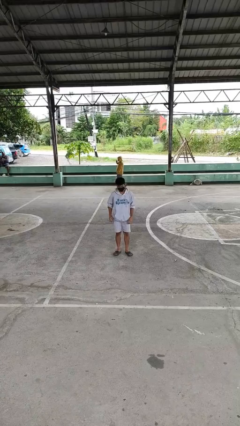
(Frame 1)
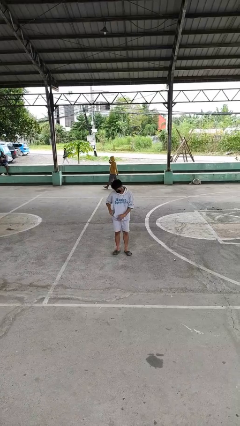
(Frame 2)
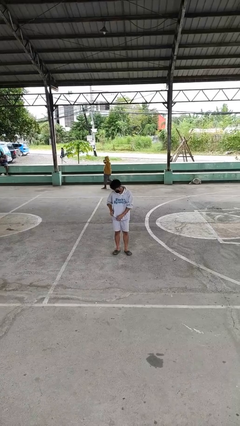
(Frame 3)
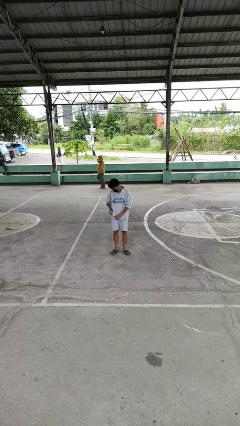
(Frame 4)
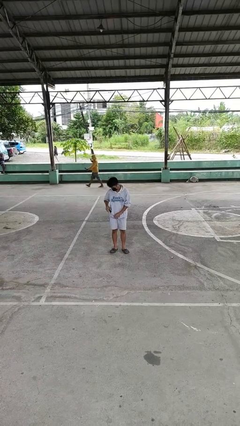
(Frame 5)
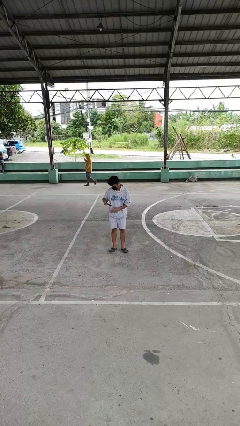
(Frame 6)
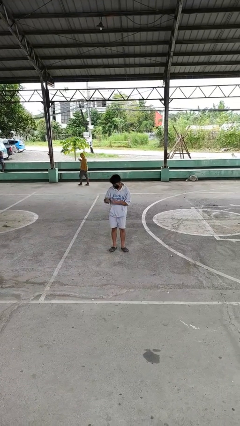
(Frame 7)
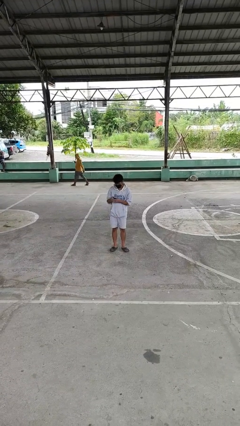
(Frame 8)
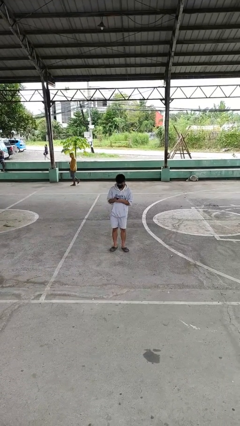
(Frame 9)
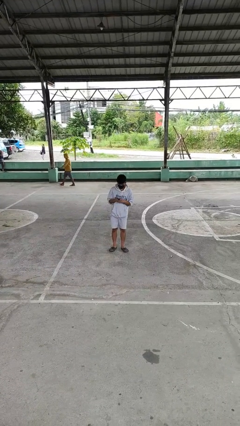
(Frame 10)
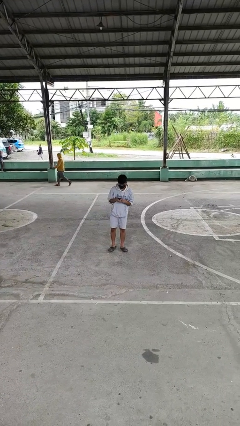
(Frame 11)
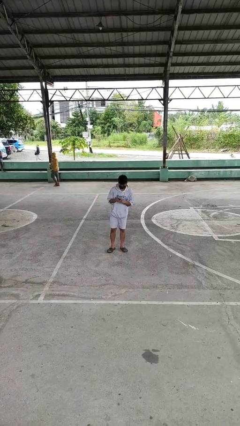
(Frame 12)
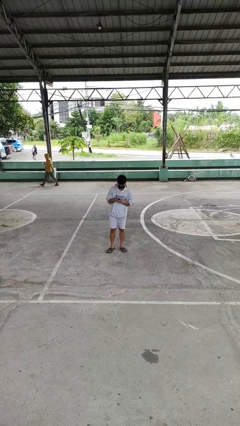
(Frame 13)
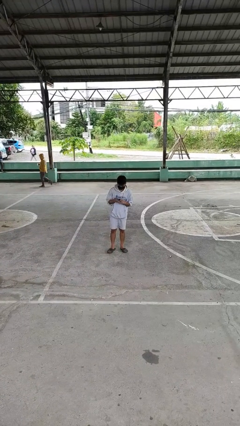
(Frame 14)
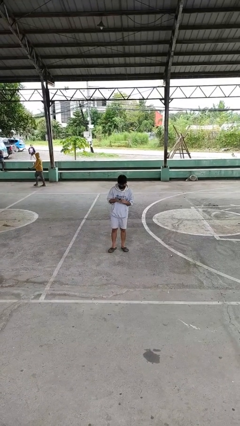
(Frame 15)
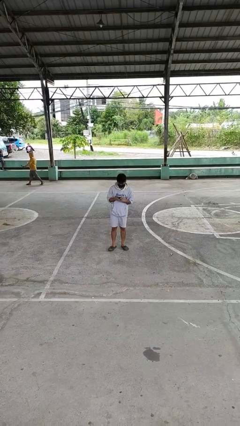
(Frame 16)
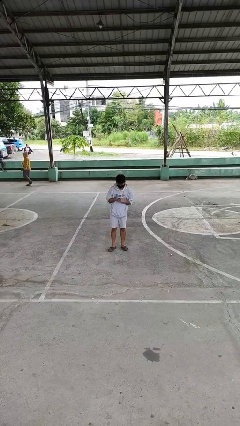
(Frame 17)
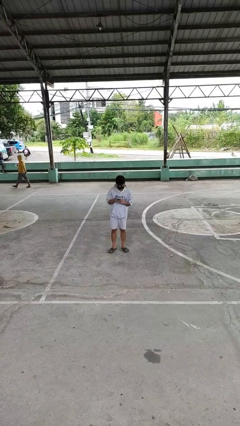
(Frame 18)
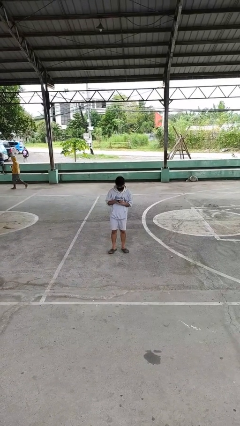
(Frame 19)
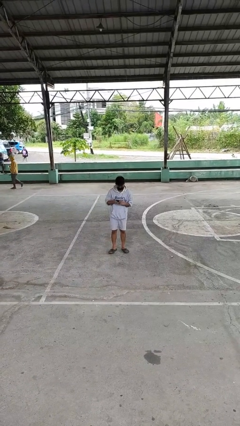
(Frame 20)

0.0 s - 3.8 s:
person takes phone from pocket

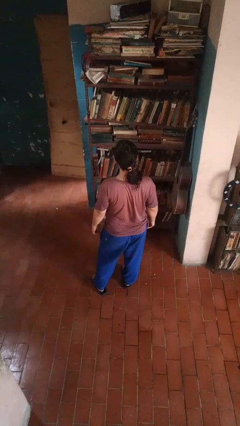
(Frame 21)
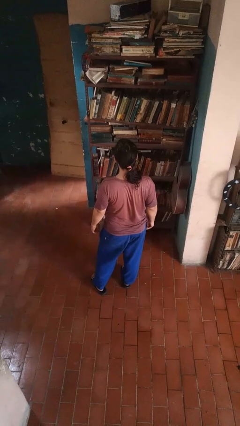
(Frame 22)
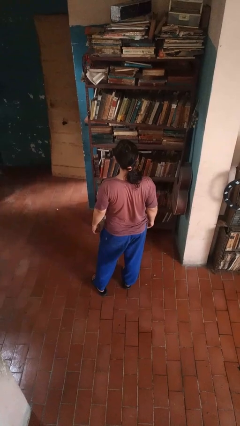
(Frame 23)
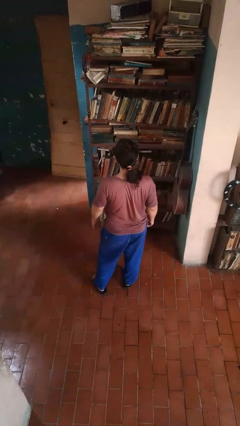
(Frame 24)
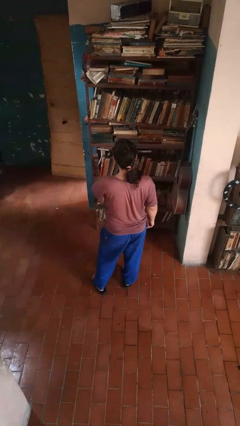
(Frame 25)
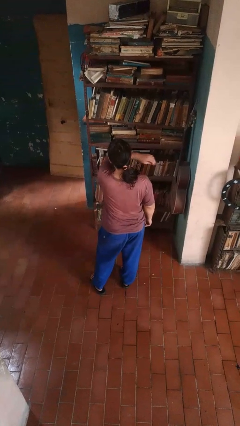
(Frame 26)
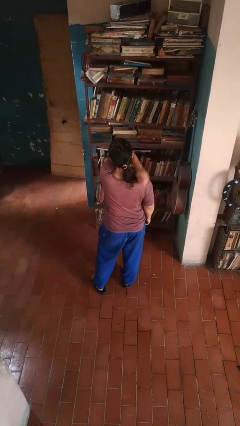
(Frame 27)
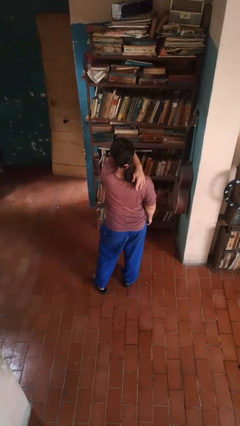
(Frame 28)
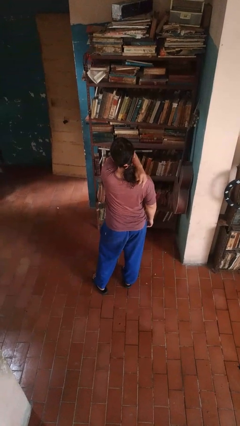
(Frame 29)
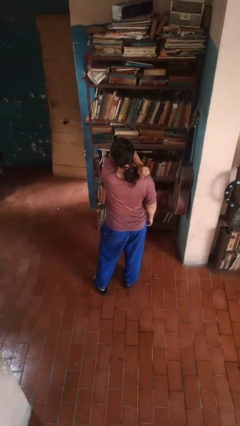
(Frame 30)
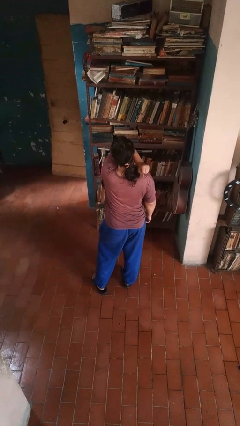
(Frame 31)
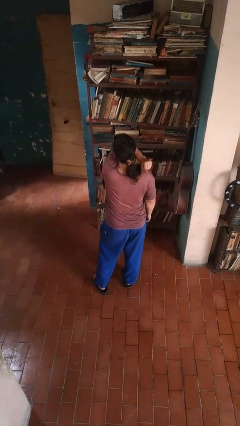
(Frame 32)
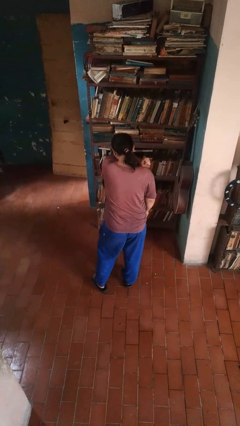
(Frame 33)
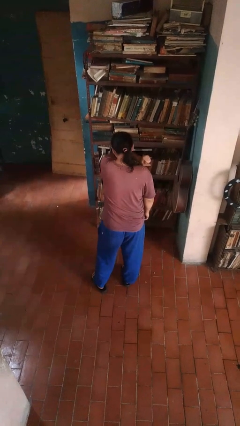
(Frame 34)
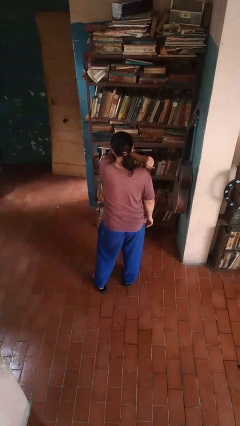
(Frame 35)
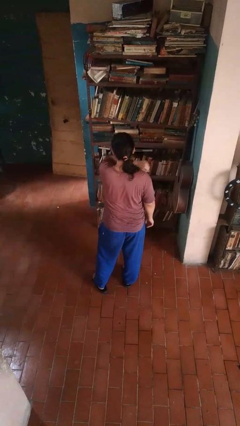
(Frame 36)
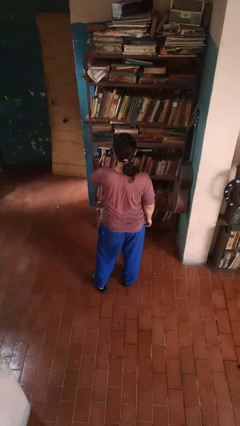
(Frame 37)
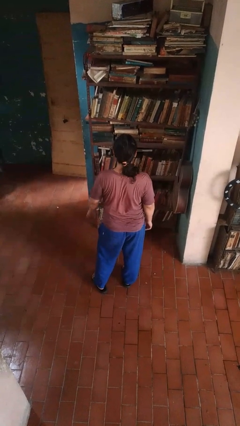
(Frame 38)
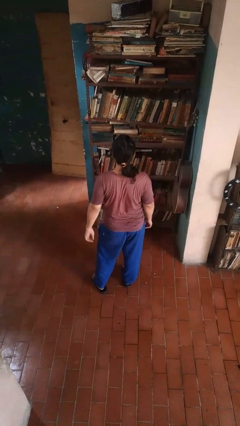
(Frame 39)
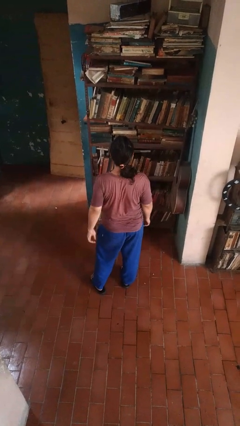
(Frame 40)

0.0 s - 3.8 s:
person sneezes into arm

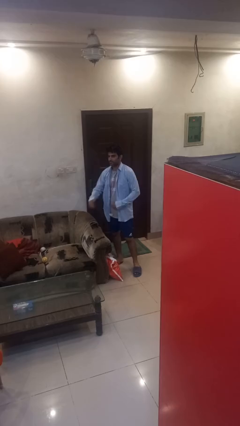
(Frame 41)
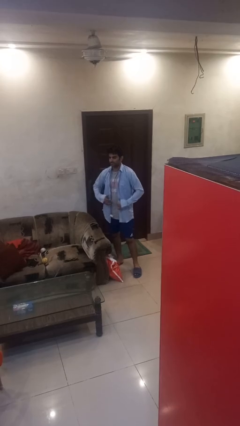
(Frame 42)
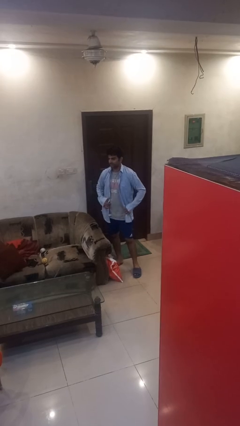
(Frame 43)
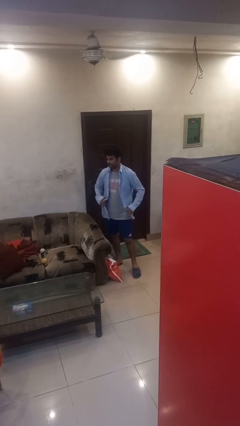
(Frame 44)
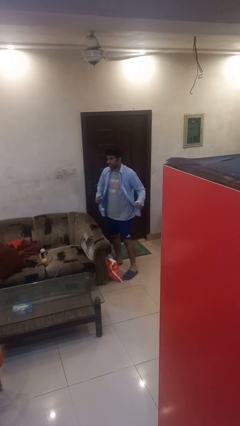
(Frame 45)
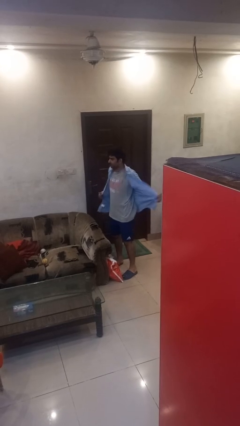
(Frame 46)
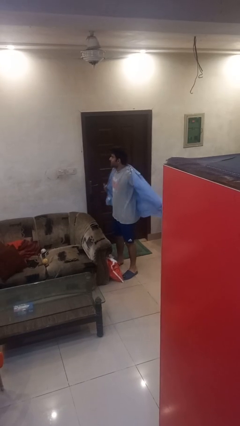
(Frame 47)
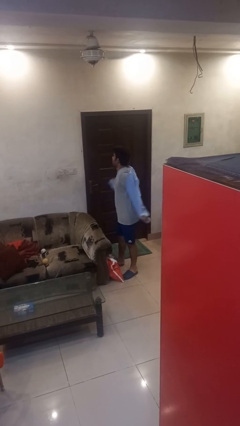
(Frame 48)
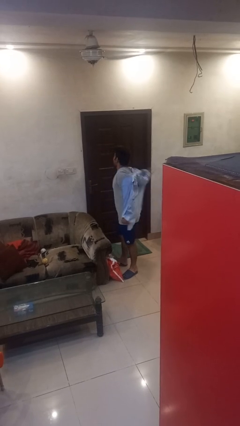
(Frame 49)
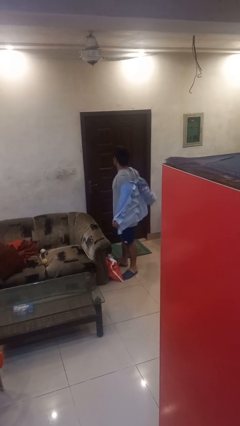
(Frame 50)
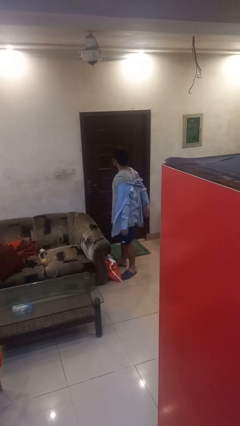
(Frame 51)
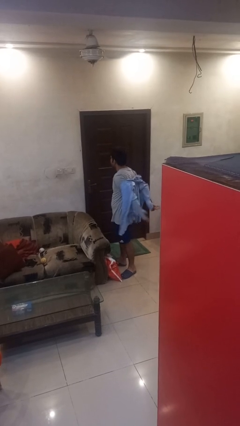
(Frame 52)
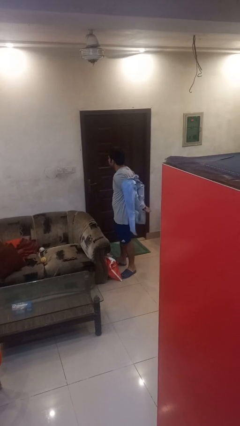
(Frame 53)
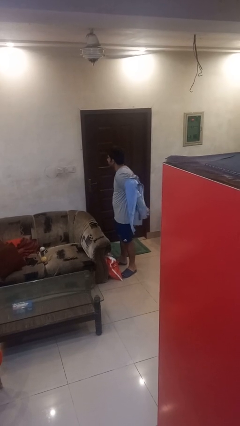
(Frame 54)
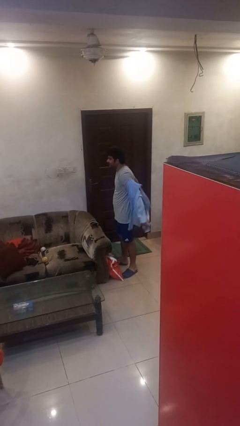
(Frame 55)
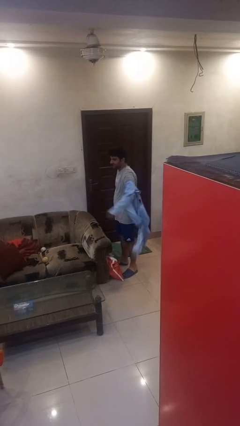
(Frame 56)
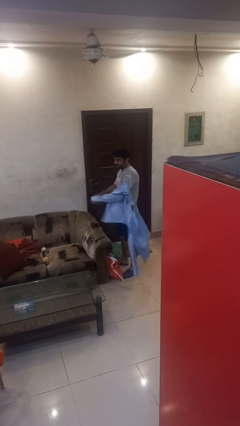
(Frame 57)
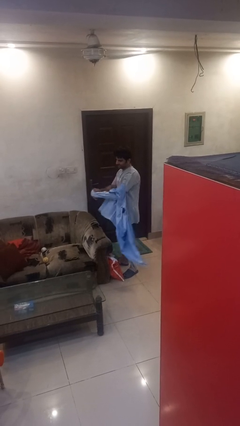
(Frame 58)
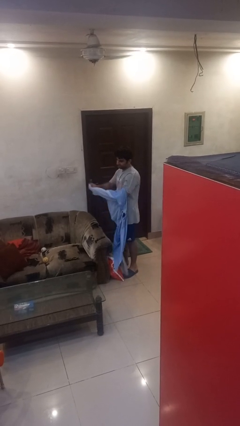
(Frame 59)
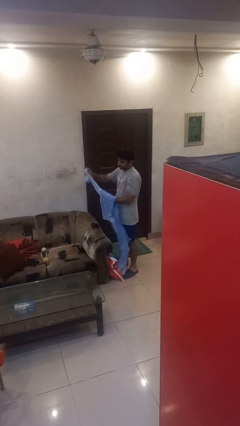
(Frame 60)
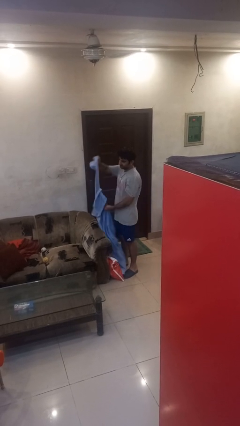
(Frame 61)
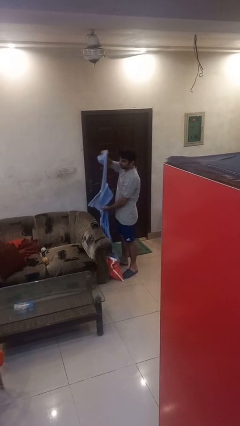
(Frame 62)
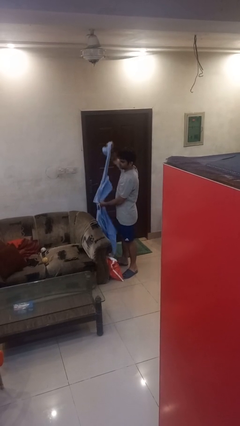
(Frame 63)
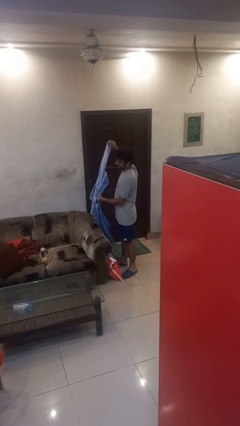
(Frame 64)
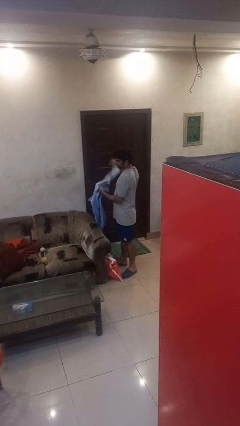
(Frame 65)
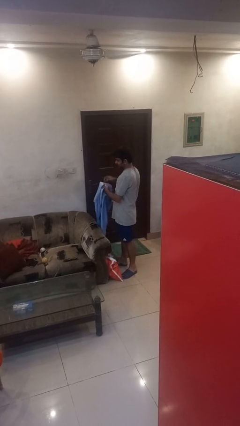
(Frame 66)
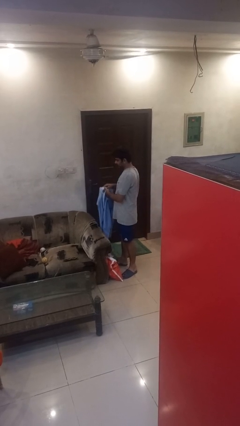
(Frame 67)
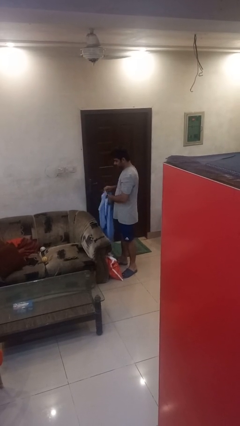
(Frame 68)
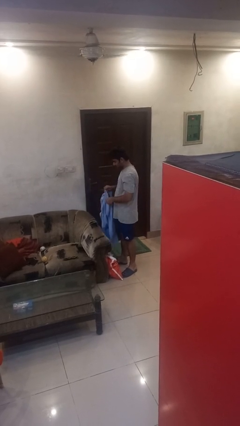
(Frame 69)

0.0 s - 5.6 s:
person takes off shirt

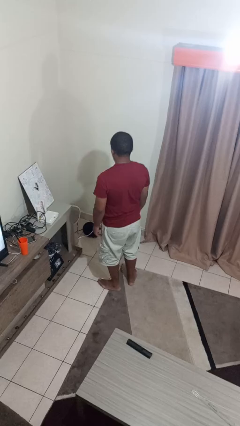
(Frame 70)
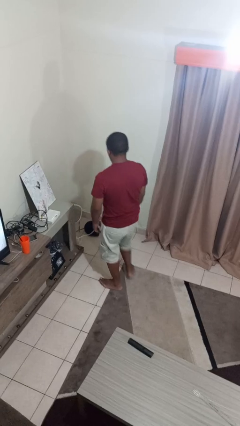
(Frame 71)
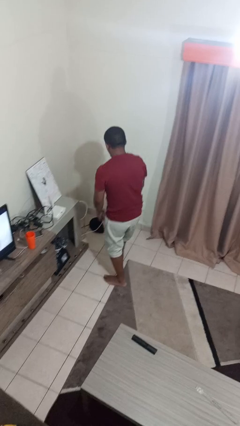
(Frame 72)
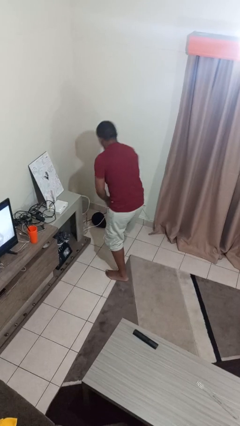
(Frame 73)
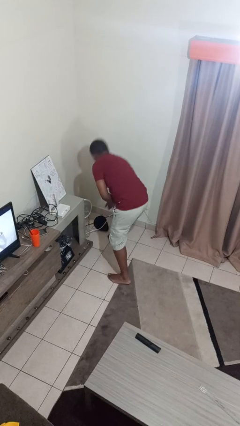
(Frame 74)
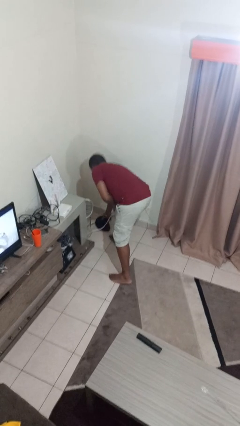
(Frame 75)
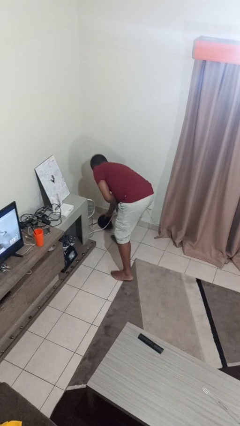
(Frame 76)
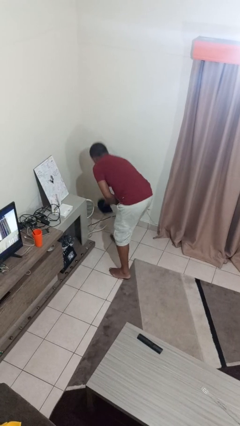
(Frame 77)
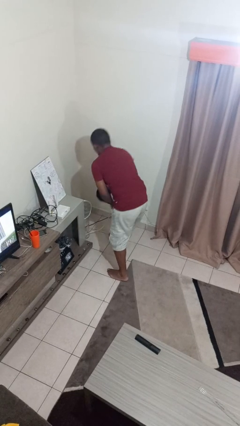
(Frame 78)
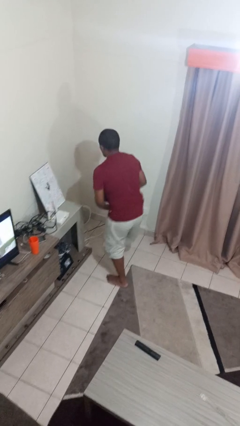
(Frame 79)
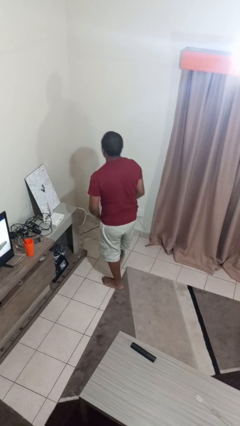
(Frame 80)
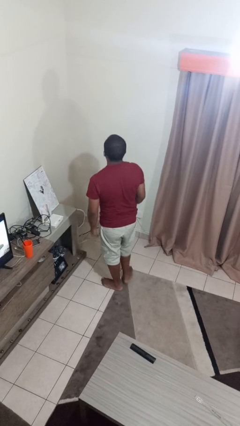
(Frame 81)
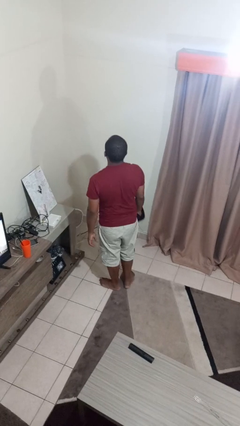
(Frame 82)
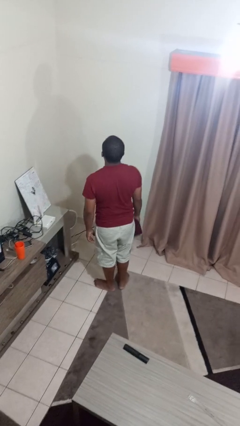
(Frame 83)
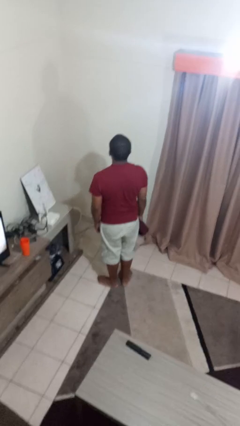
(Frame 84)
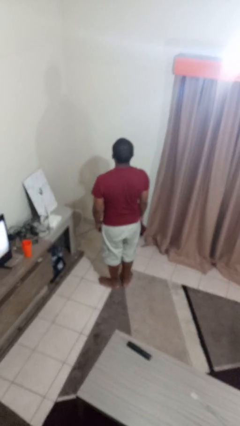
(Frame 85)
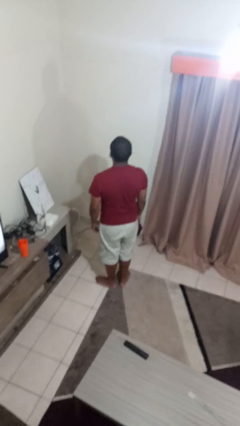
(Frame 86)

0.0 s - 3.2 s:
person picks up object from floor

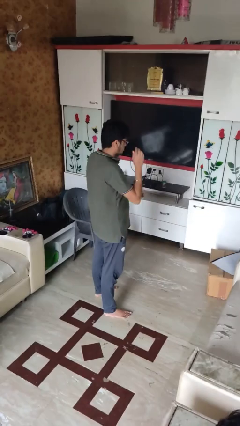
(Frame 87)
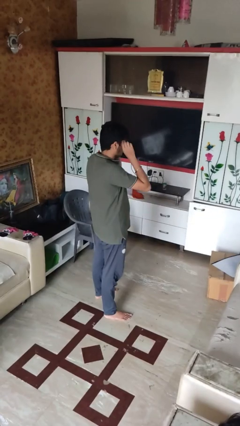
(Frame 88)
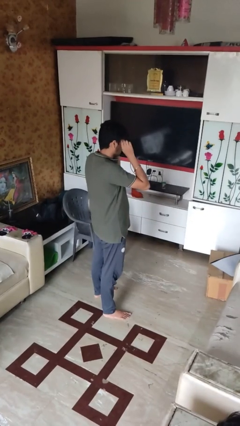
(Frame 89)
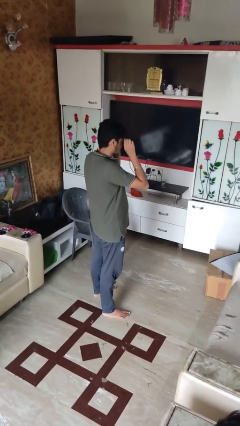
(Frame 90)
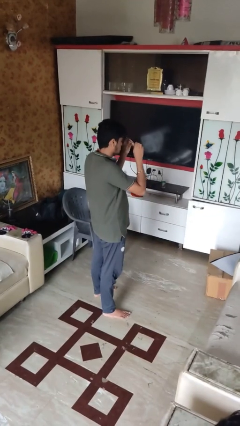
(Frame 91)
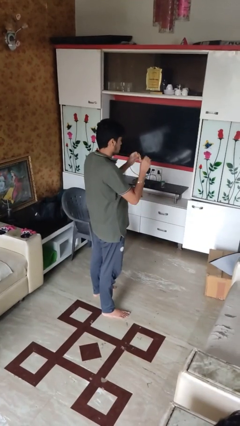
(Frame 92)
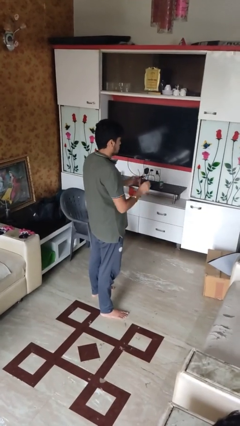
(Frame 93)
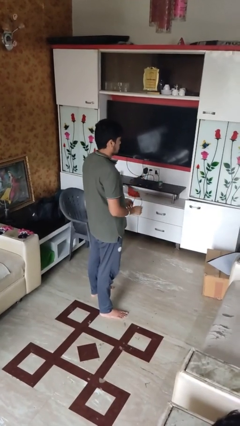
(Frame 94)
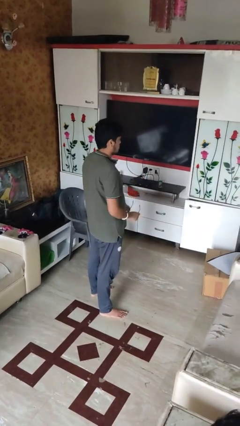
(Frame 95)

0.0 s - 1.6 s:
person takes off glasses
